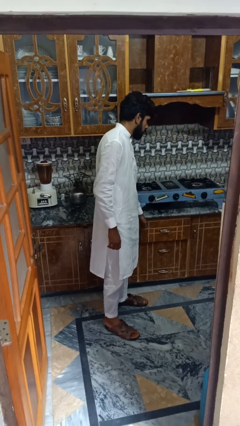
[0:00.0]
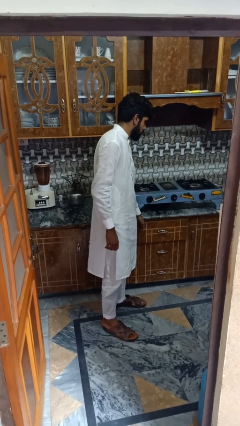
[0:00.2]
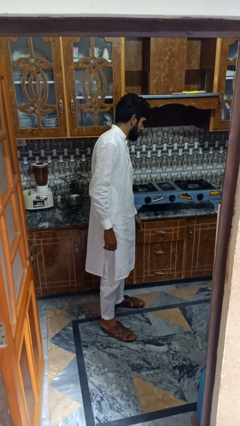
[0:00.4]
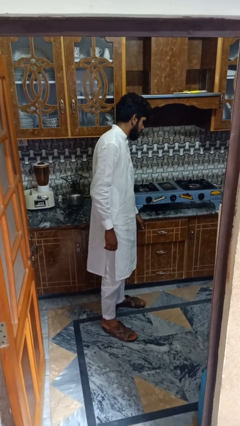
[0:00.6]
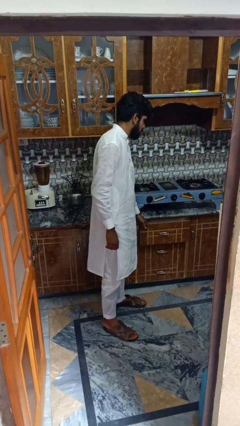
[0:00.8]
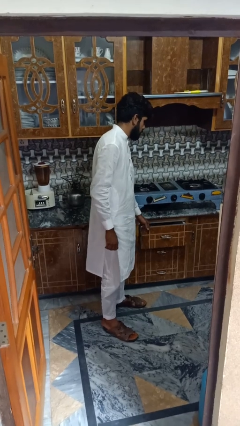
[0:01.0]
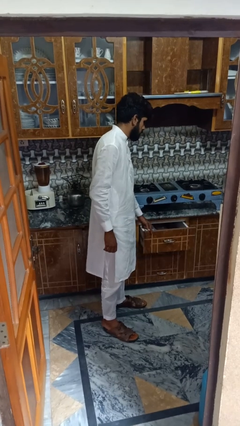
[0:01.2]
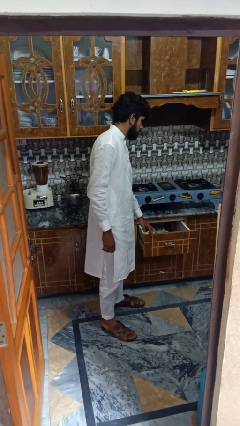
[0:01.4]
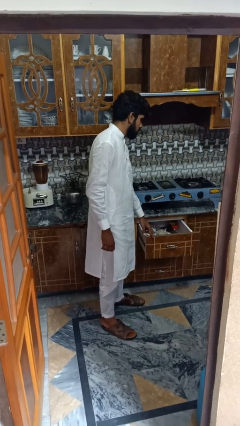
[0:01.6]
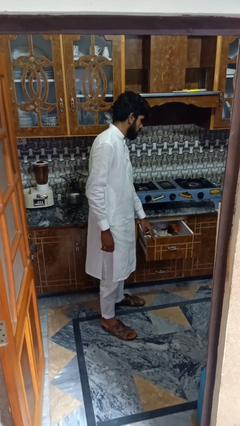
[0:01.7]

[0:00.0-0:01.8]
person opens kitchen drawer

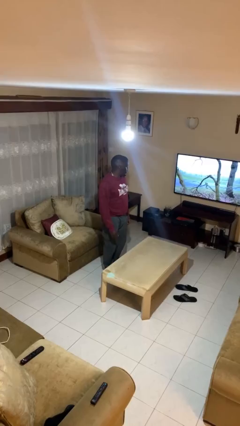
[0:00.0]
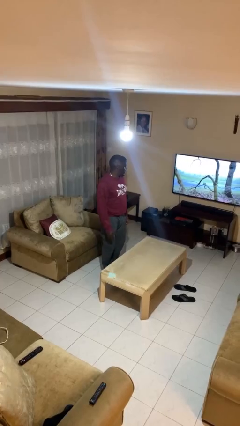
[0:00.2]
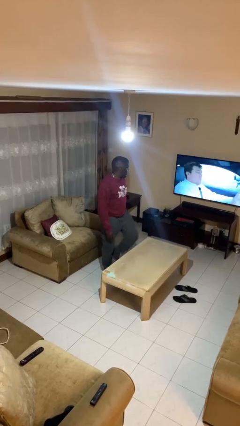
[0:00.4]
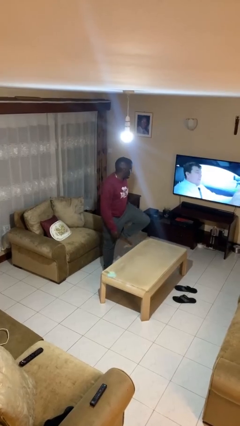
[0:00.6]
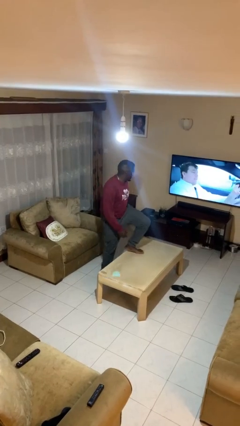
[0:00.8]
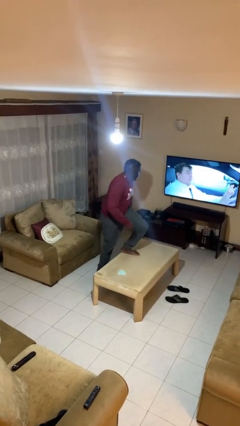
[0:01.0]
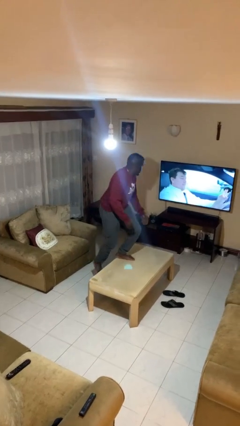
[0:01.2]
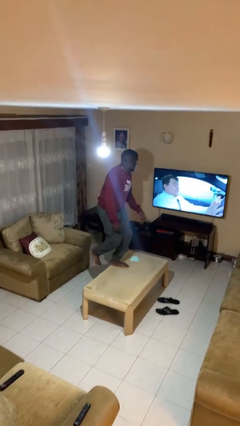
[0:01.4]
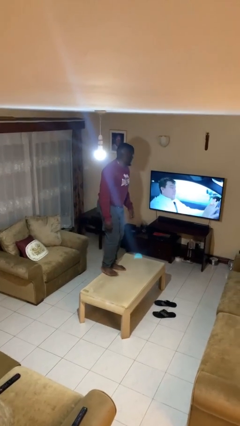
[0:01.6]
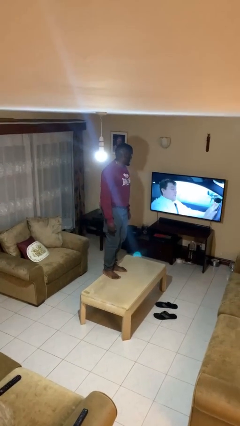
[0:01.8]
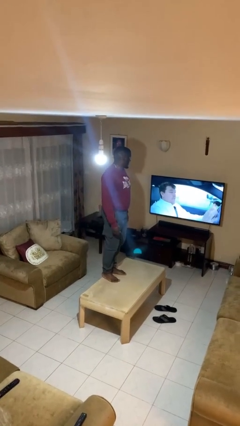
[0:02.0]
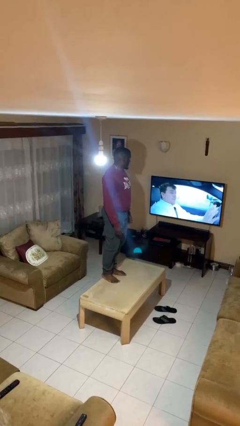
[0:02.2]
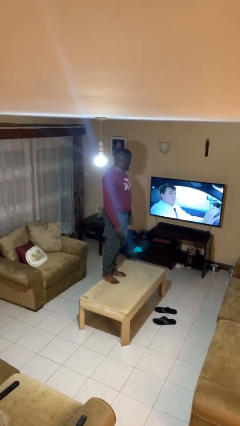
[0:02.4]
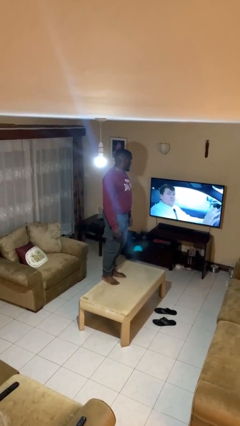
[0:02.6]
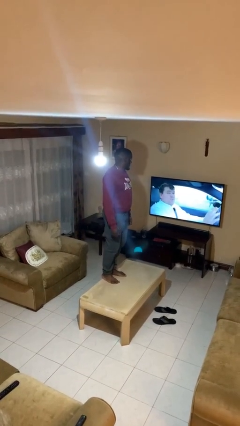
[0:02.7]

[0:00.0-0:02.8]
person climbs on table

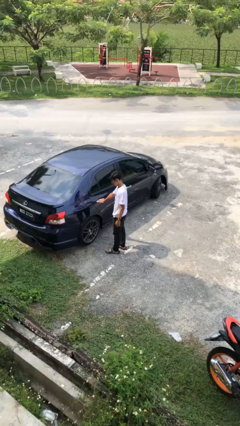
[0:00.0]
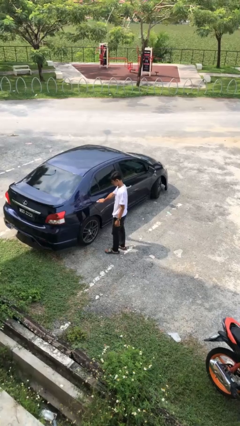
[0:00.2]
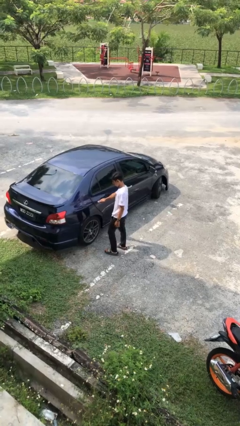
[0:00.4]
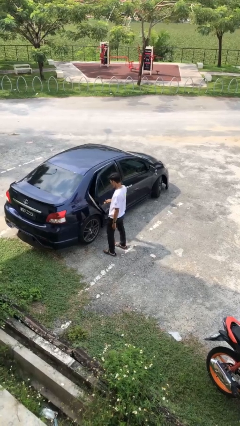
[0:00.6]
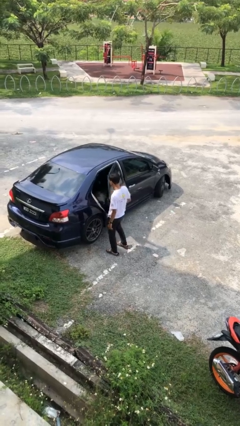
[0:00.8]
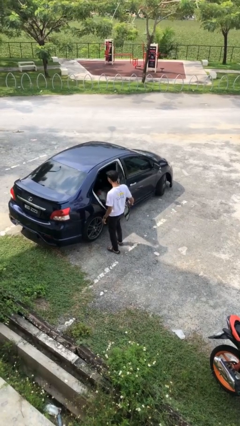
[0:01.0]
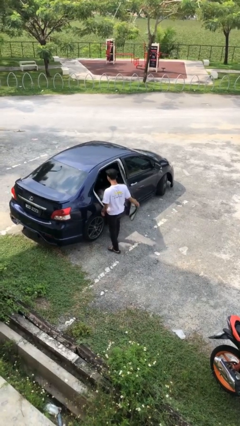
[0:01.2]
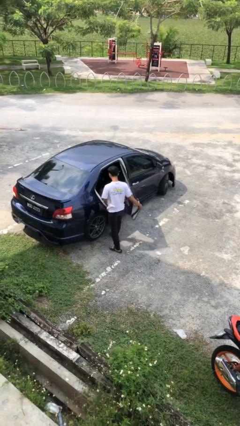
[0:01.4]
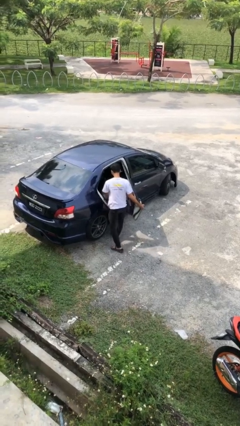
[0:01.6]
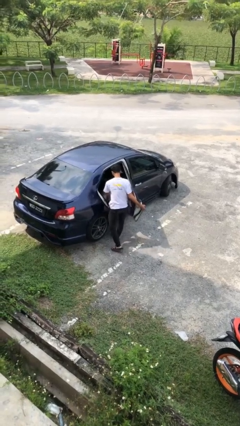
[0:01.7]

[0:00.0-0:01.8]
person opens car door

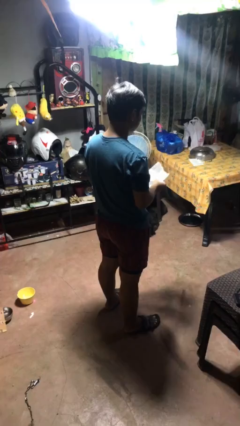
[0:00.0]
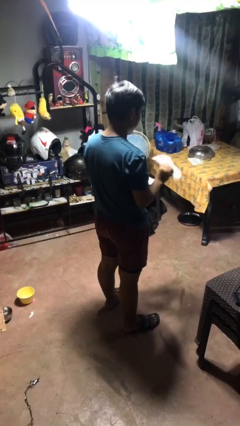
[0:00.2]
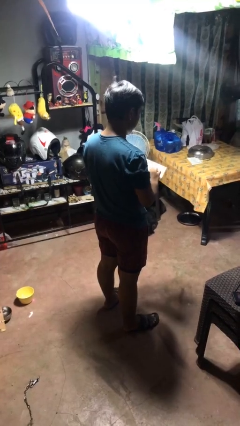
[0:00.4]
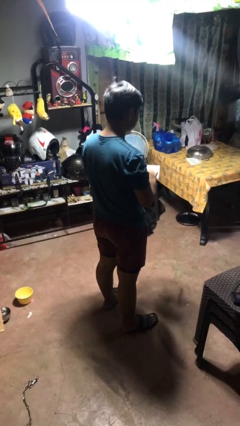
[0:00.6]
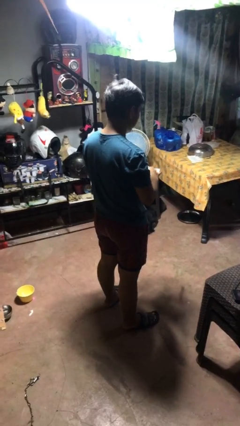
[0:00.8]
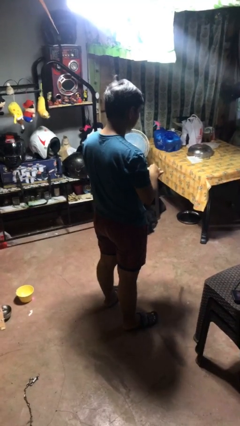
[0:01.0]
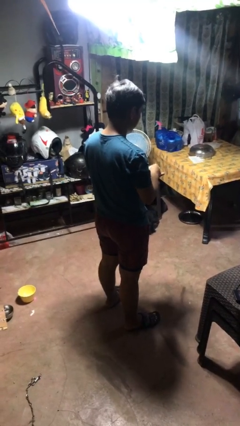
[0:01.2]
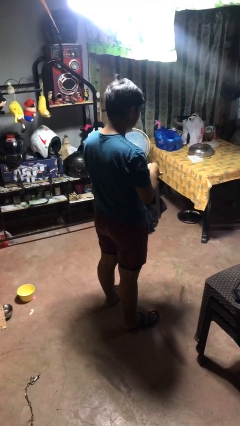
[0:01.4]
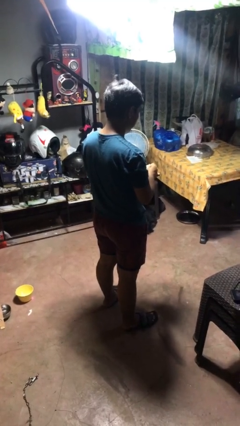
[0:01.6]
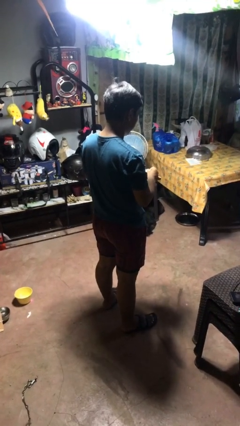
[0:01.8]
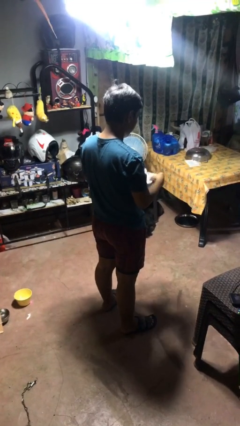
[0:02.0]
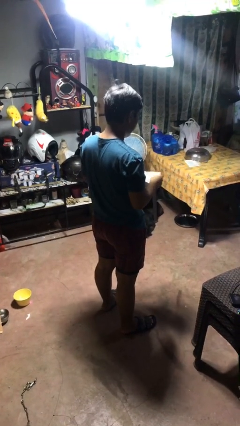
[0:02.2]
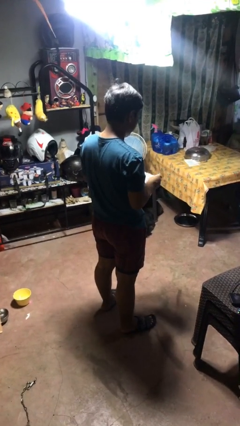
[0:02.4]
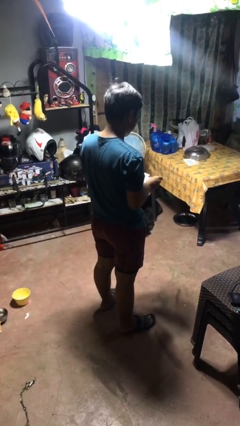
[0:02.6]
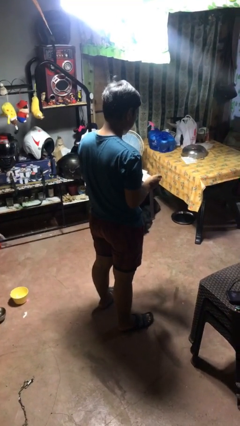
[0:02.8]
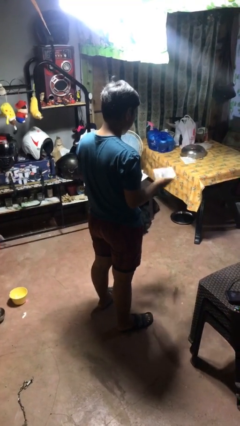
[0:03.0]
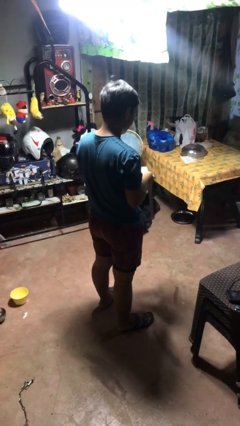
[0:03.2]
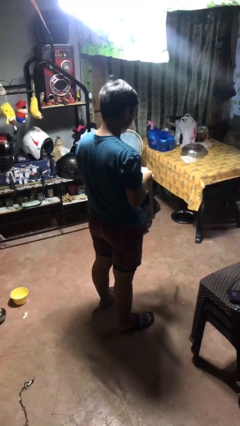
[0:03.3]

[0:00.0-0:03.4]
person tears paper

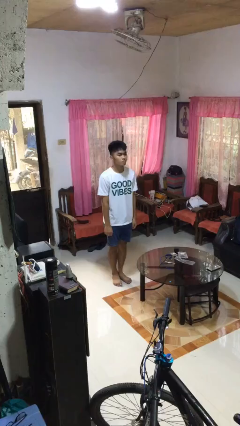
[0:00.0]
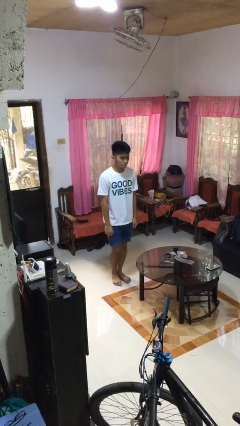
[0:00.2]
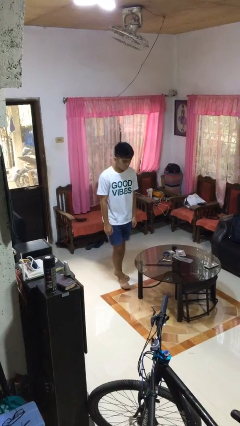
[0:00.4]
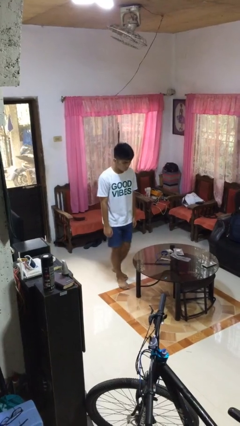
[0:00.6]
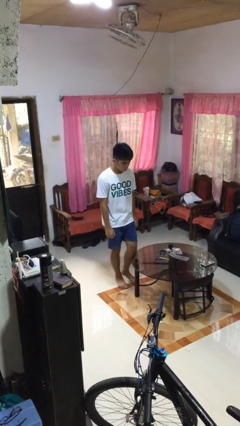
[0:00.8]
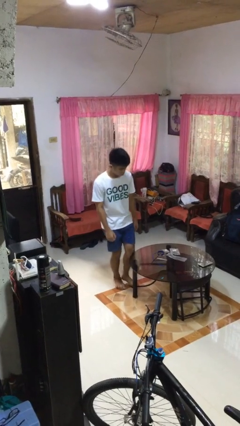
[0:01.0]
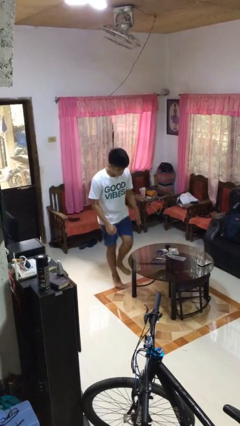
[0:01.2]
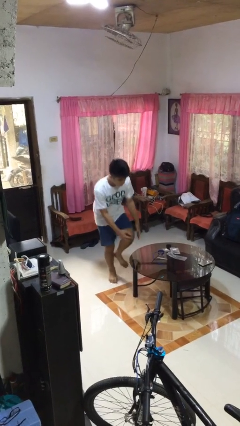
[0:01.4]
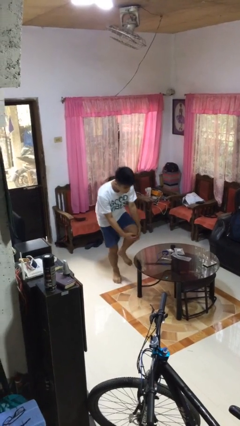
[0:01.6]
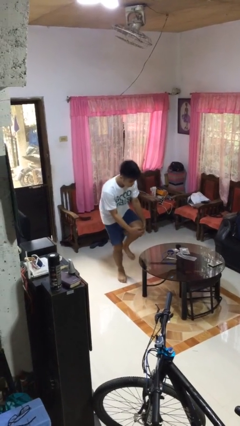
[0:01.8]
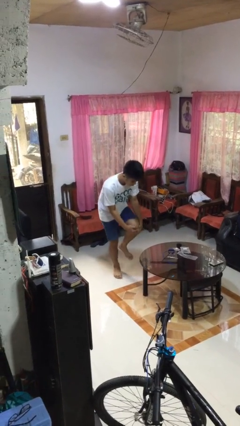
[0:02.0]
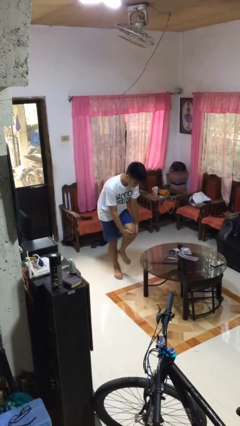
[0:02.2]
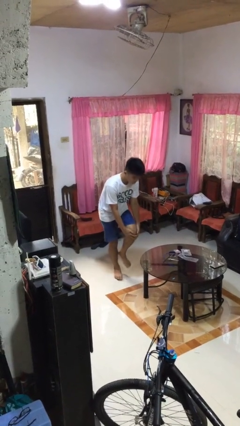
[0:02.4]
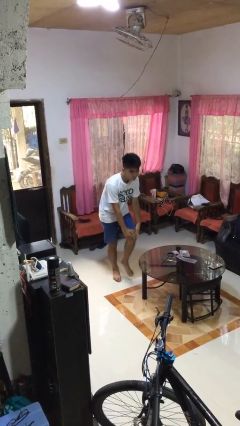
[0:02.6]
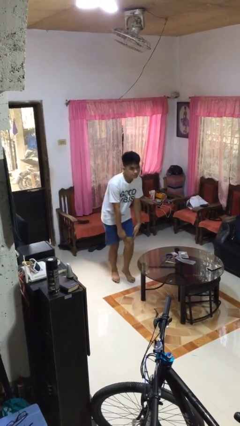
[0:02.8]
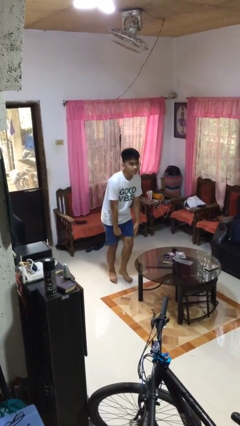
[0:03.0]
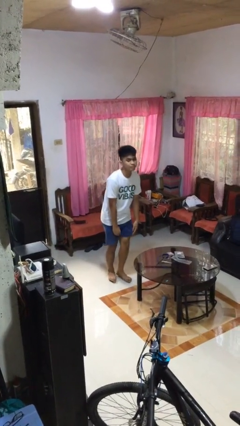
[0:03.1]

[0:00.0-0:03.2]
person bumps into table

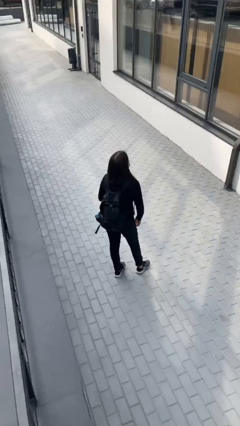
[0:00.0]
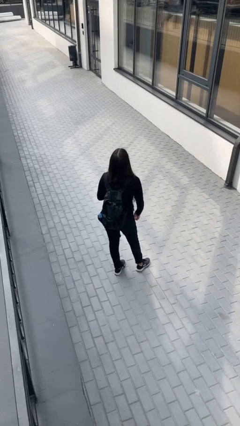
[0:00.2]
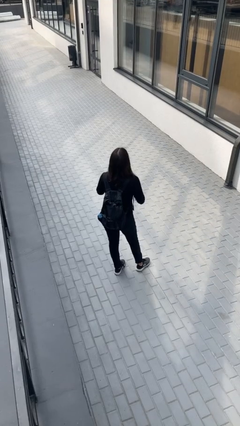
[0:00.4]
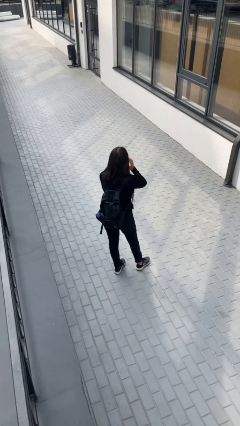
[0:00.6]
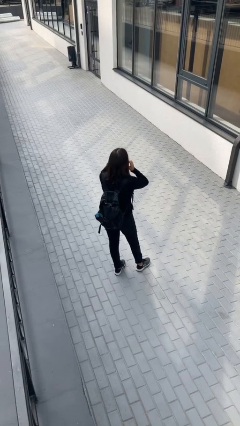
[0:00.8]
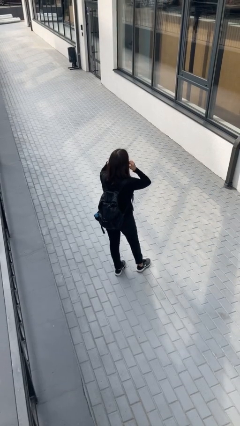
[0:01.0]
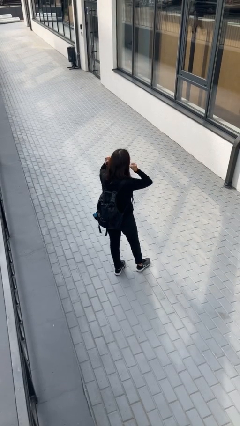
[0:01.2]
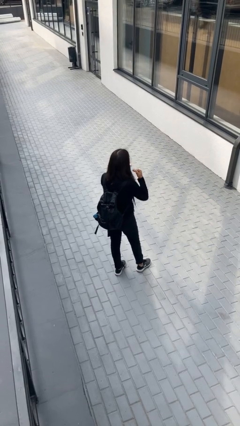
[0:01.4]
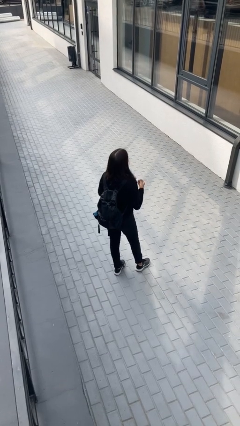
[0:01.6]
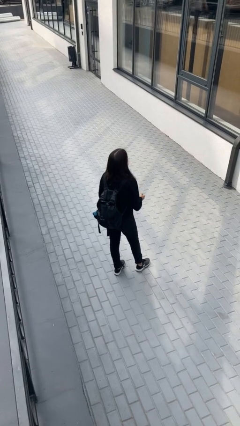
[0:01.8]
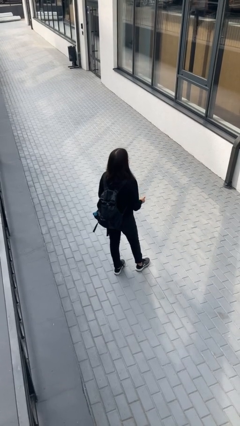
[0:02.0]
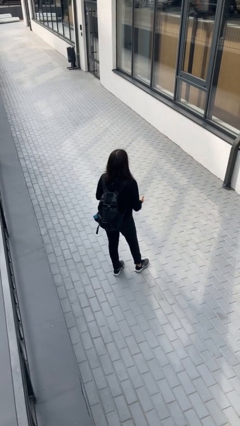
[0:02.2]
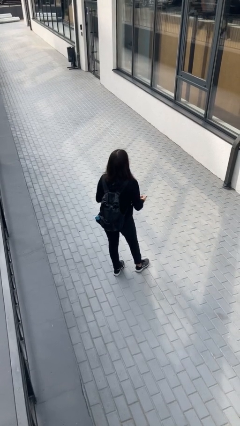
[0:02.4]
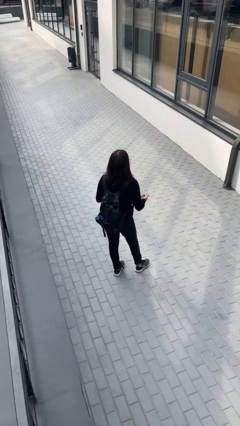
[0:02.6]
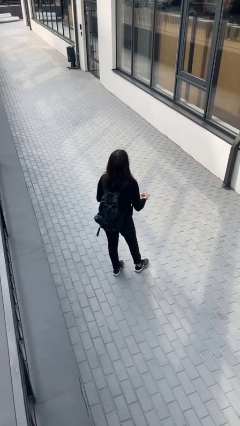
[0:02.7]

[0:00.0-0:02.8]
person takes off facemask

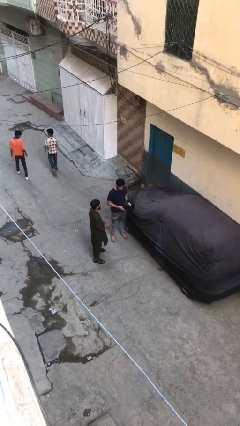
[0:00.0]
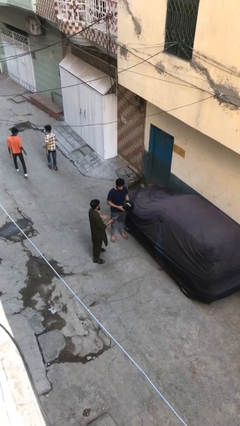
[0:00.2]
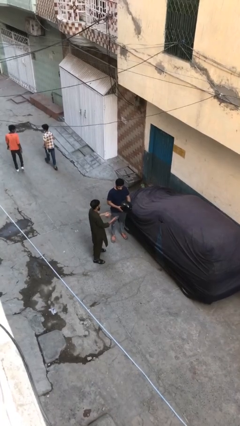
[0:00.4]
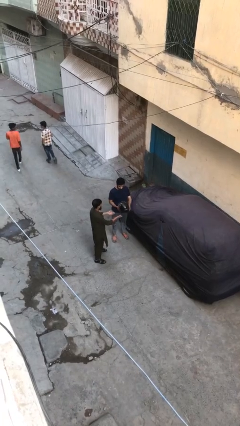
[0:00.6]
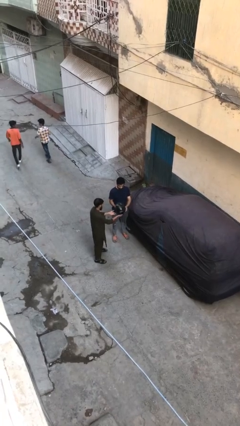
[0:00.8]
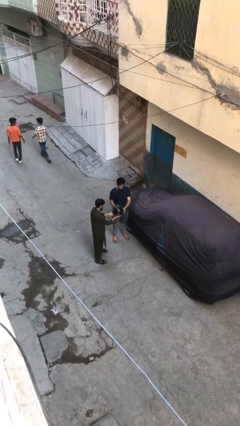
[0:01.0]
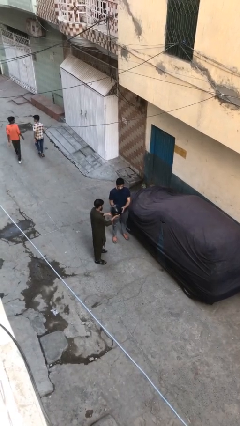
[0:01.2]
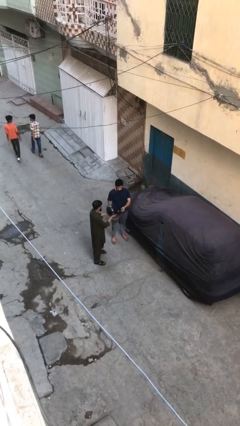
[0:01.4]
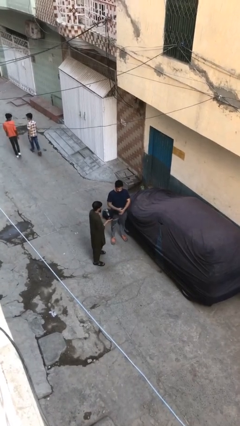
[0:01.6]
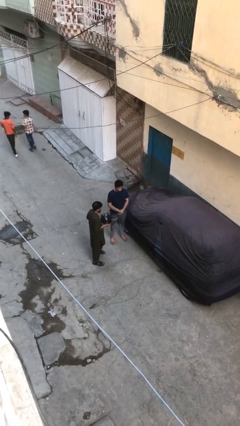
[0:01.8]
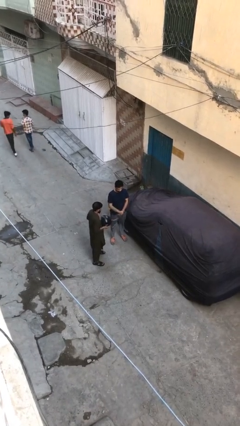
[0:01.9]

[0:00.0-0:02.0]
person transfers object to person
